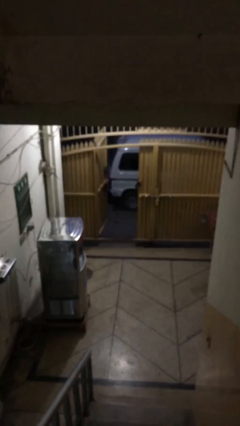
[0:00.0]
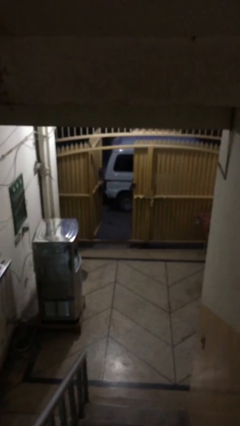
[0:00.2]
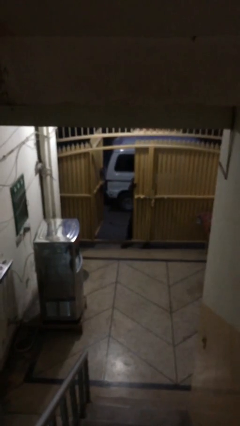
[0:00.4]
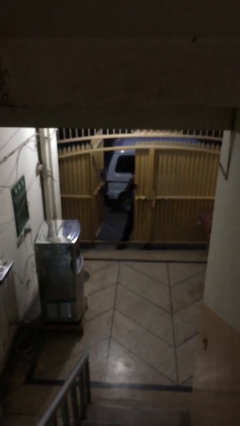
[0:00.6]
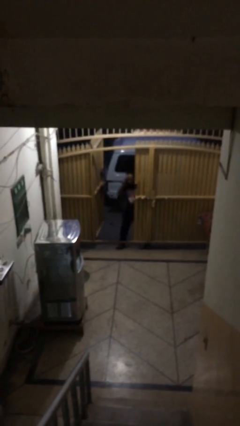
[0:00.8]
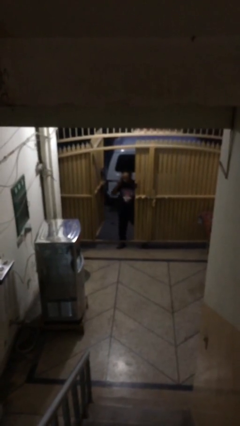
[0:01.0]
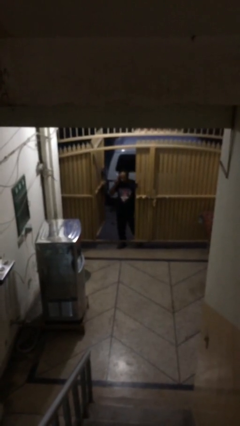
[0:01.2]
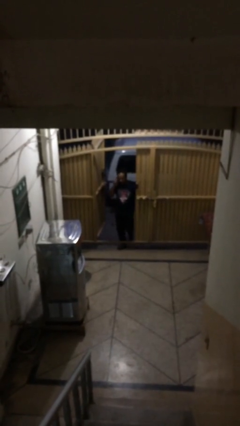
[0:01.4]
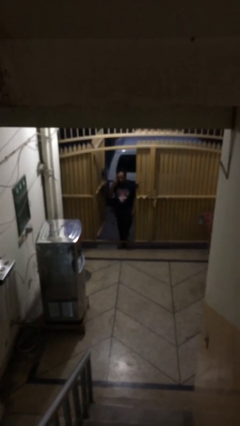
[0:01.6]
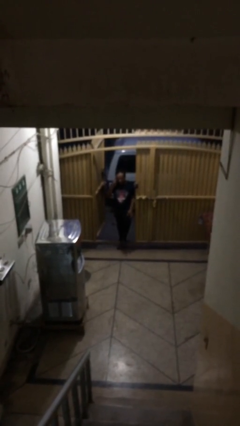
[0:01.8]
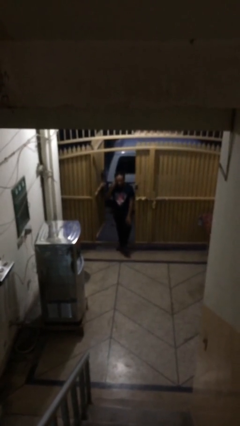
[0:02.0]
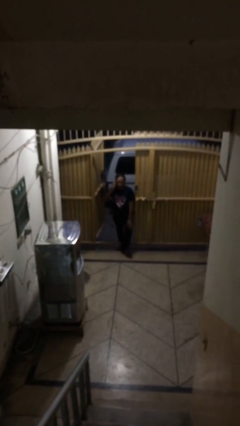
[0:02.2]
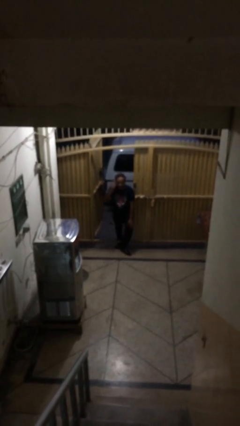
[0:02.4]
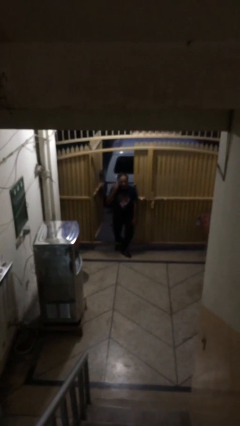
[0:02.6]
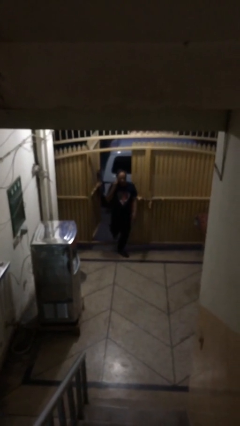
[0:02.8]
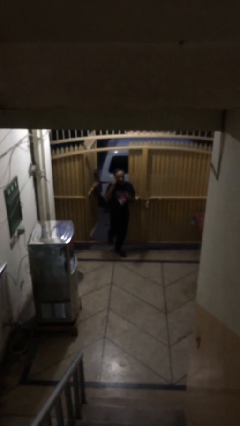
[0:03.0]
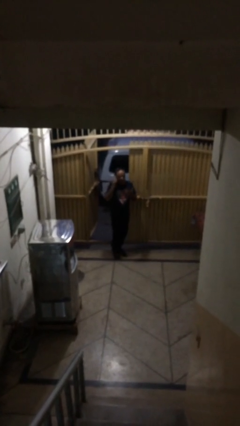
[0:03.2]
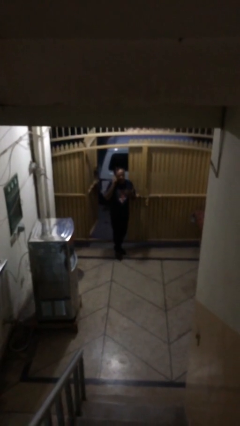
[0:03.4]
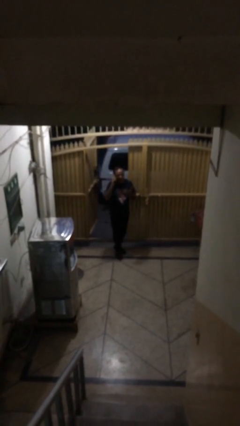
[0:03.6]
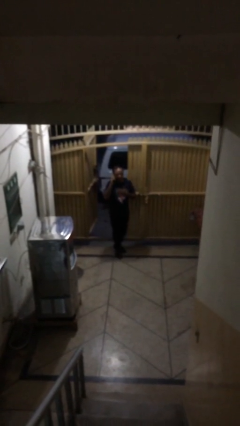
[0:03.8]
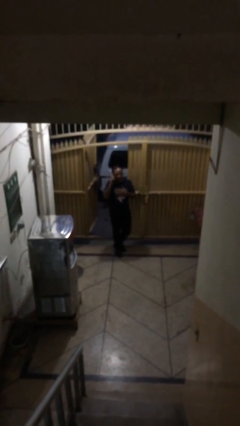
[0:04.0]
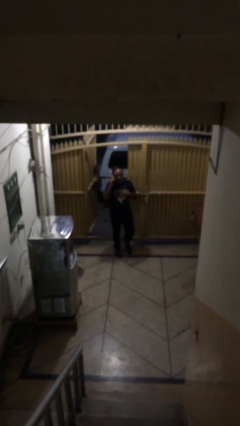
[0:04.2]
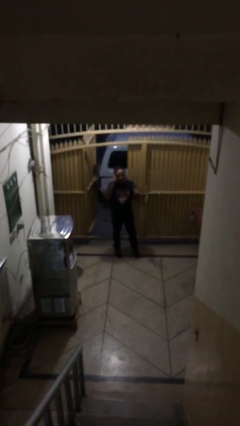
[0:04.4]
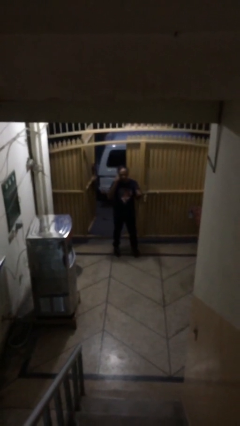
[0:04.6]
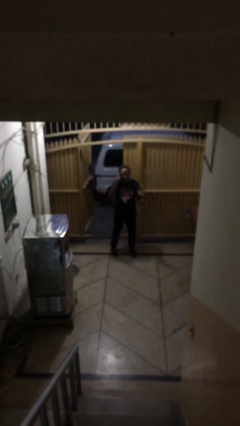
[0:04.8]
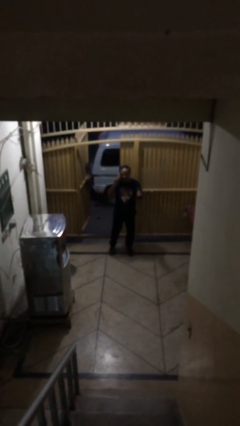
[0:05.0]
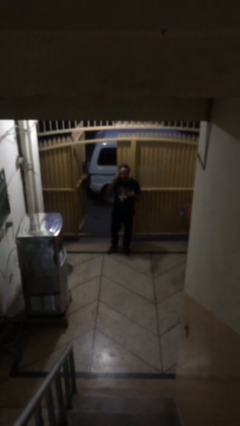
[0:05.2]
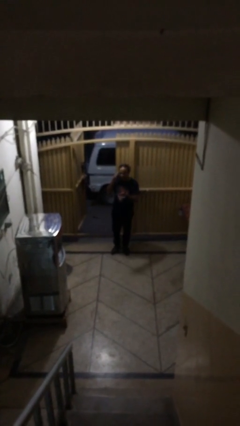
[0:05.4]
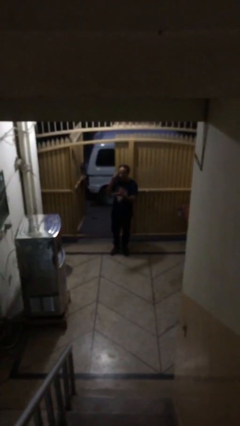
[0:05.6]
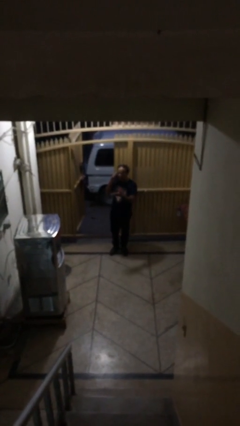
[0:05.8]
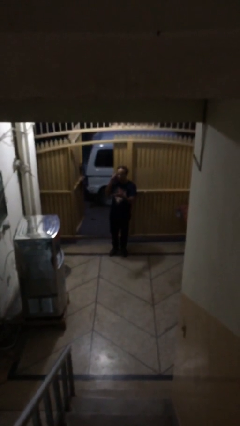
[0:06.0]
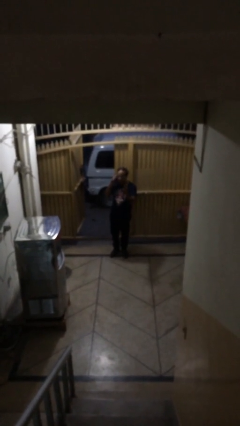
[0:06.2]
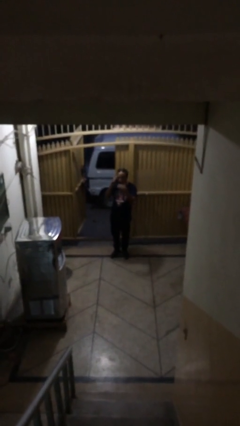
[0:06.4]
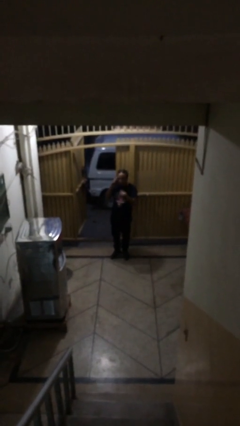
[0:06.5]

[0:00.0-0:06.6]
person enters scene through structure

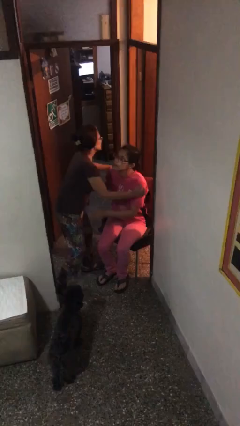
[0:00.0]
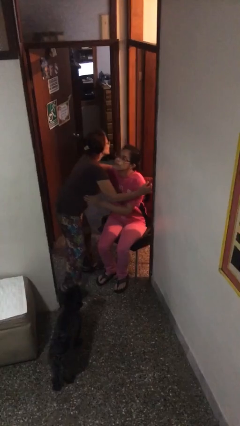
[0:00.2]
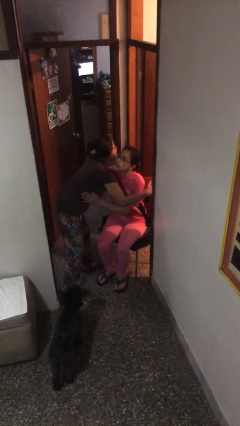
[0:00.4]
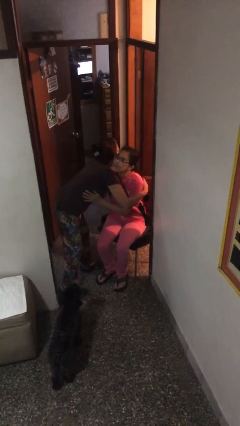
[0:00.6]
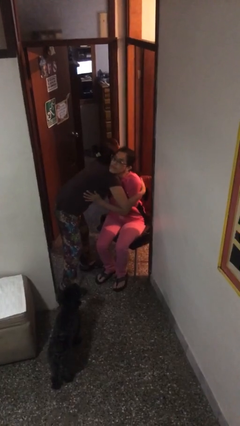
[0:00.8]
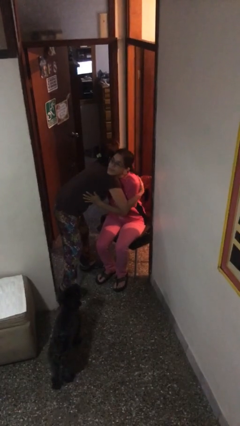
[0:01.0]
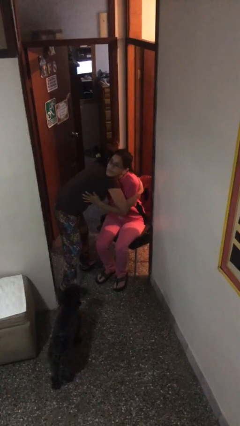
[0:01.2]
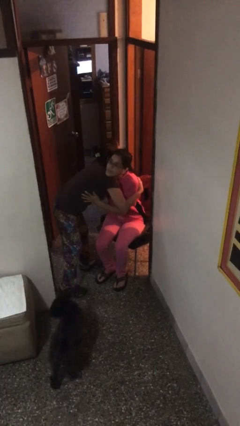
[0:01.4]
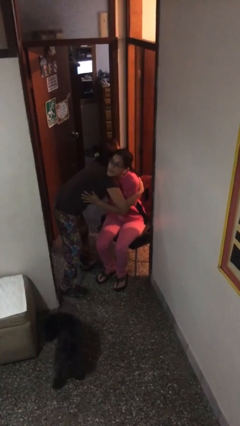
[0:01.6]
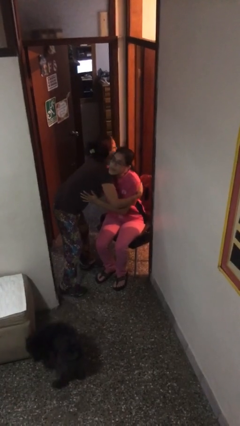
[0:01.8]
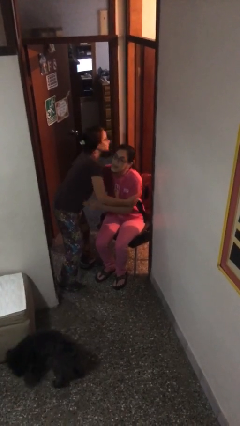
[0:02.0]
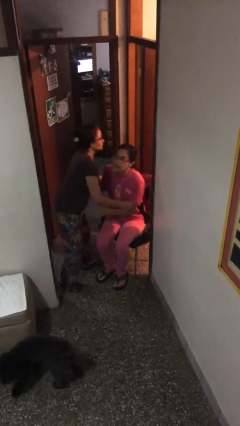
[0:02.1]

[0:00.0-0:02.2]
person embraces person

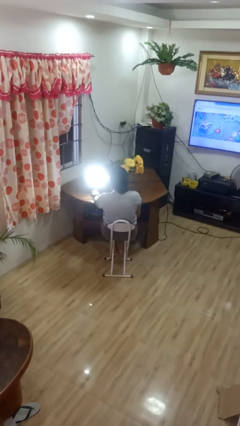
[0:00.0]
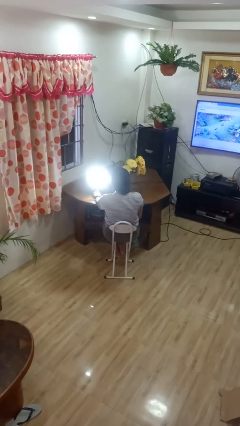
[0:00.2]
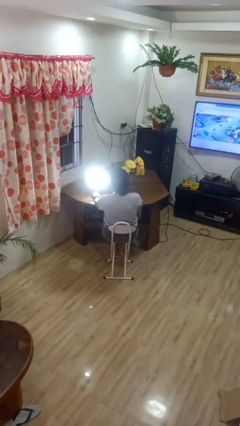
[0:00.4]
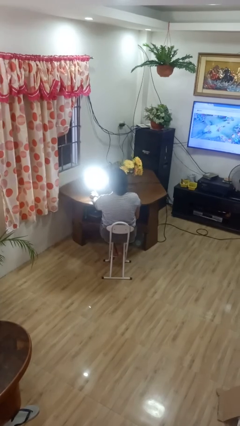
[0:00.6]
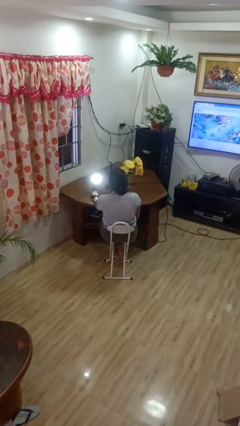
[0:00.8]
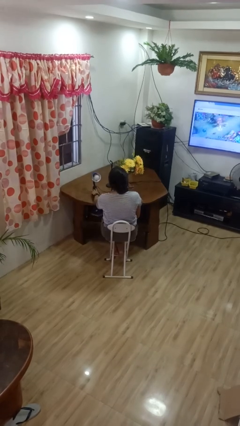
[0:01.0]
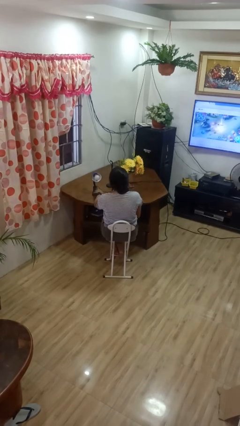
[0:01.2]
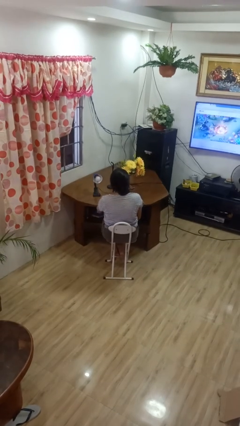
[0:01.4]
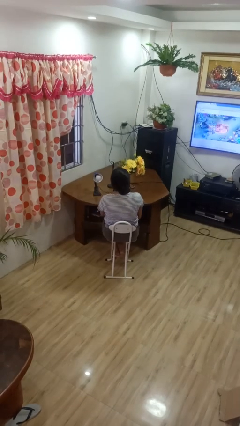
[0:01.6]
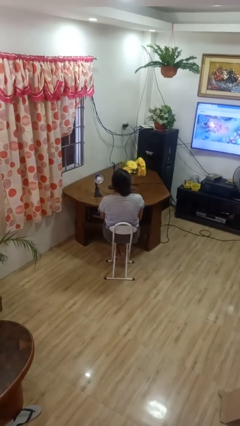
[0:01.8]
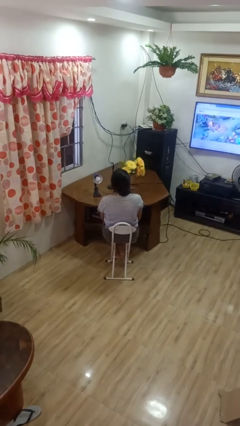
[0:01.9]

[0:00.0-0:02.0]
person turns off lamp

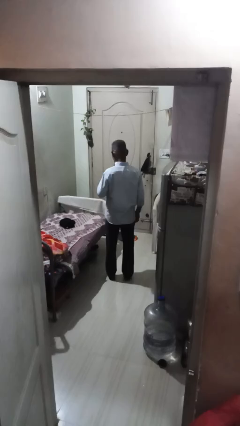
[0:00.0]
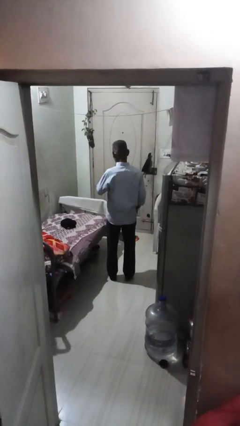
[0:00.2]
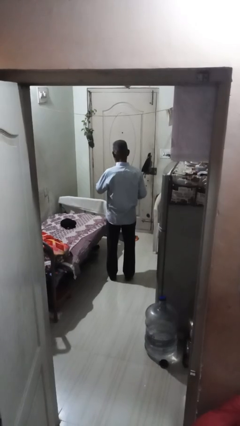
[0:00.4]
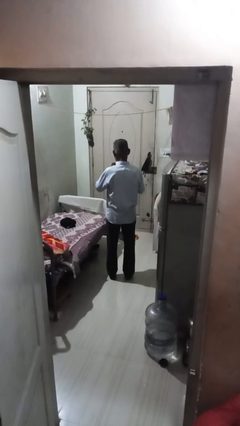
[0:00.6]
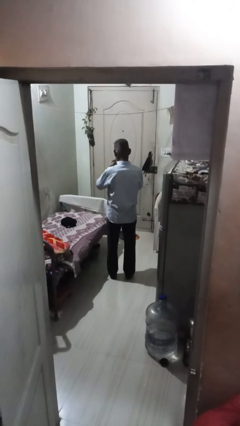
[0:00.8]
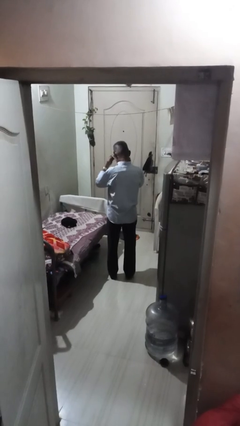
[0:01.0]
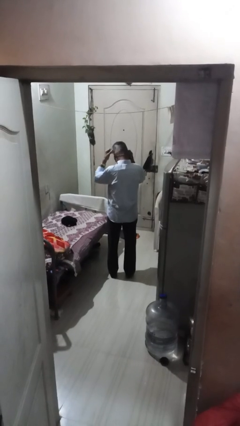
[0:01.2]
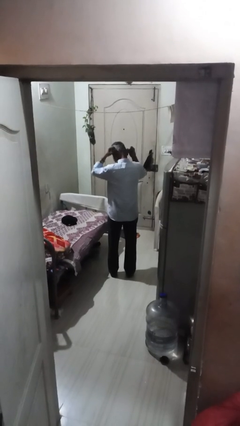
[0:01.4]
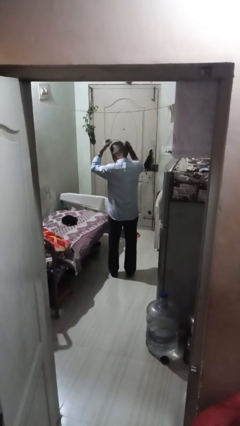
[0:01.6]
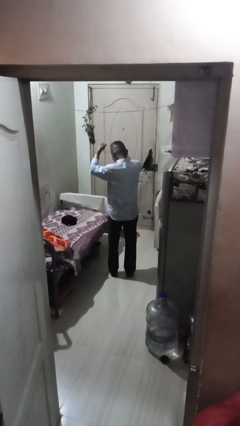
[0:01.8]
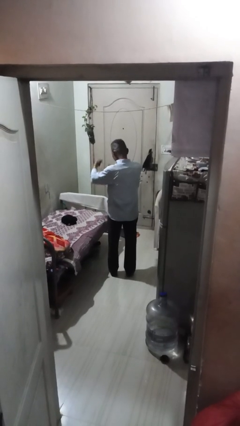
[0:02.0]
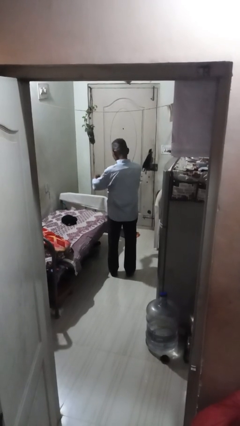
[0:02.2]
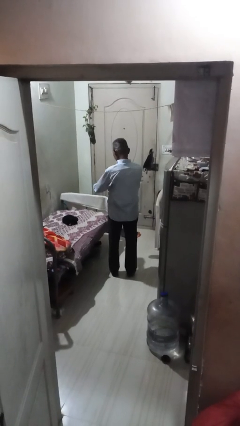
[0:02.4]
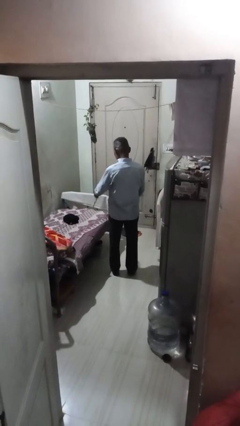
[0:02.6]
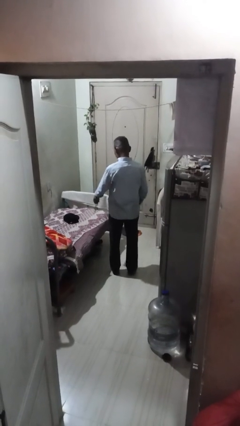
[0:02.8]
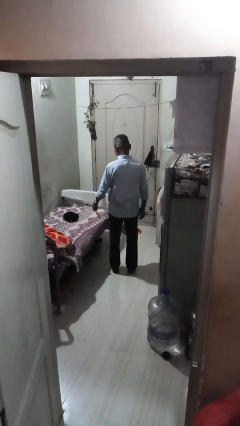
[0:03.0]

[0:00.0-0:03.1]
person takes off necklace

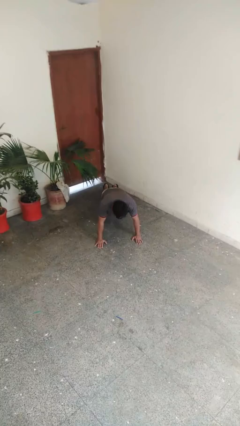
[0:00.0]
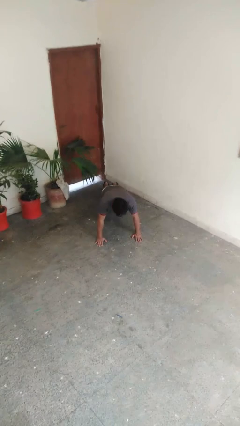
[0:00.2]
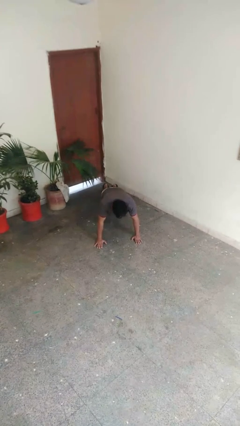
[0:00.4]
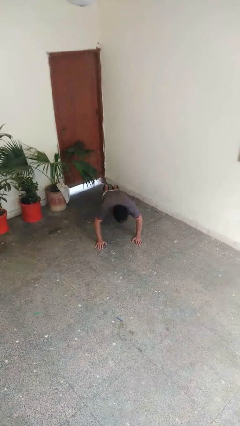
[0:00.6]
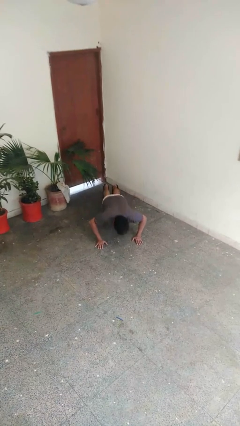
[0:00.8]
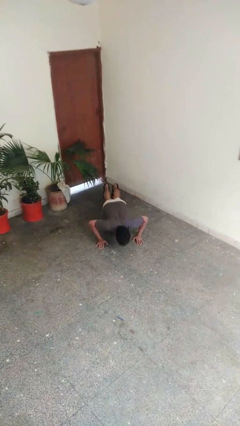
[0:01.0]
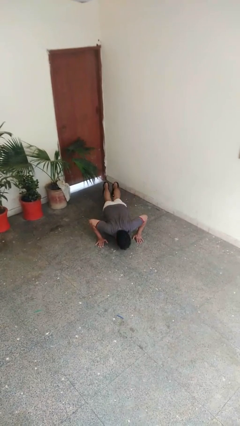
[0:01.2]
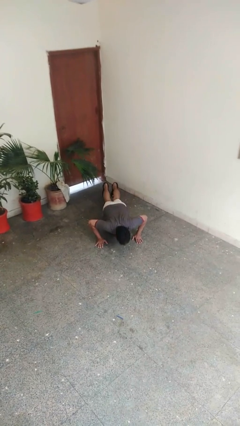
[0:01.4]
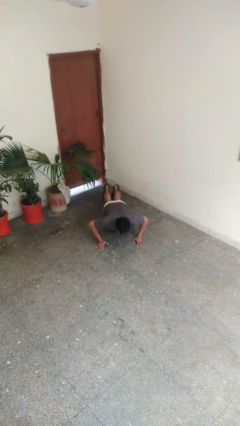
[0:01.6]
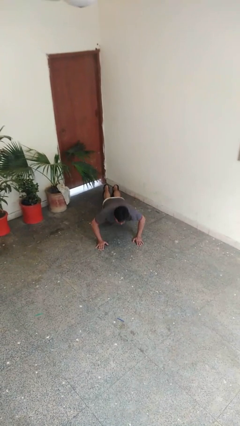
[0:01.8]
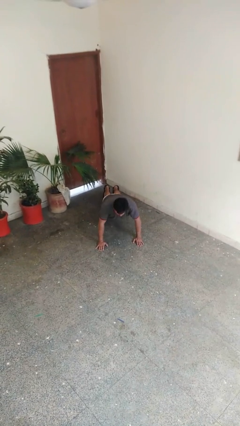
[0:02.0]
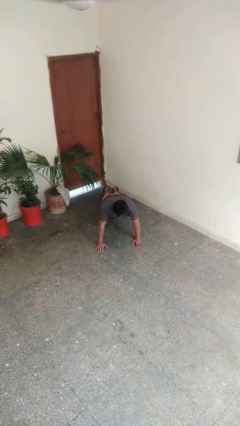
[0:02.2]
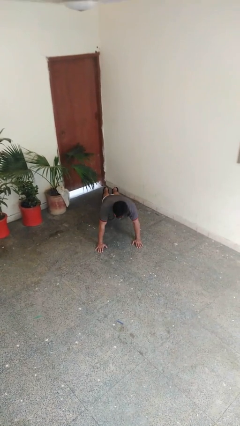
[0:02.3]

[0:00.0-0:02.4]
person exercises with pushup

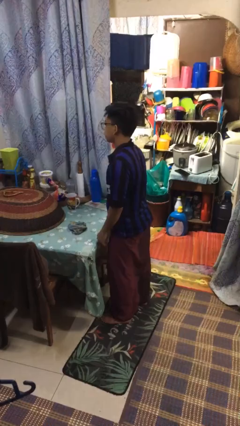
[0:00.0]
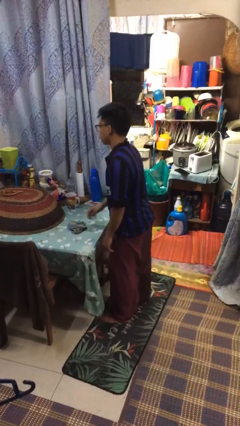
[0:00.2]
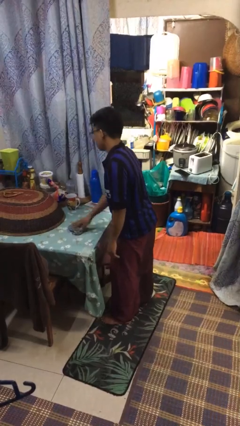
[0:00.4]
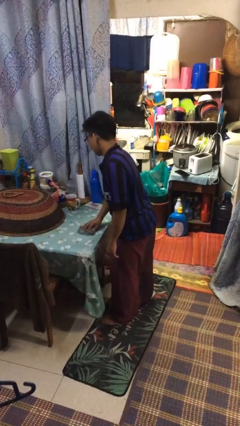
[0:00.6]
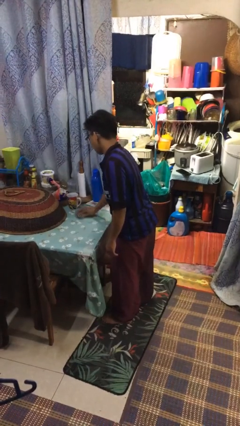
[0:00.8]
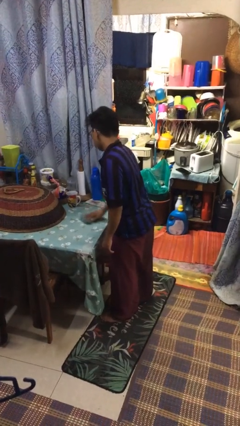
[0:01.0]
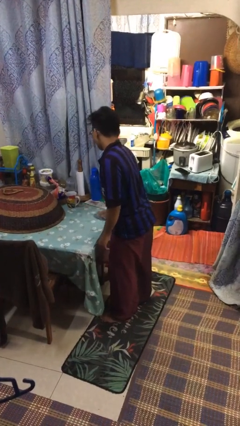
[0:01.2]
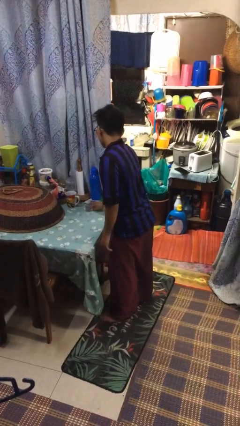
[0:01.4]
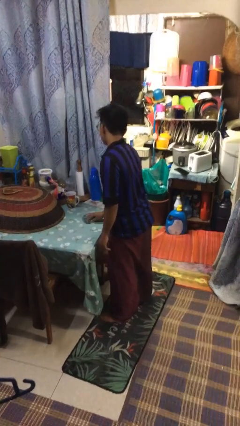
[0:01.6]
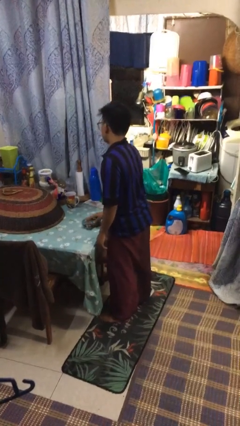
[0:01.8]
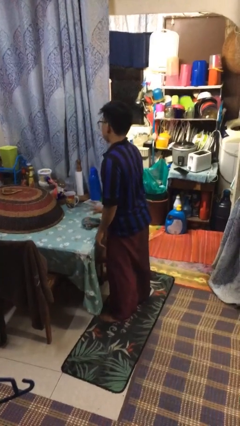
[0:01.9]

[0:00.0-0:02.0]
person cleans table with rag
